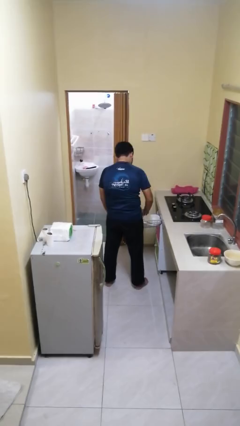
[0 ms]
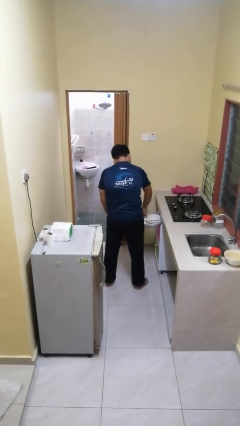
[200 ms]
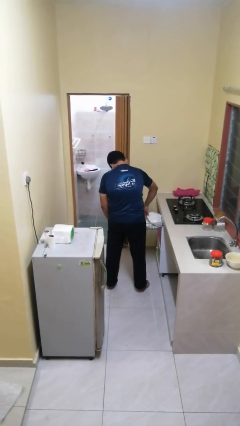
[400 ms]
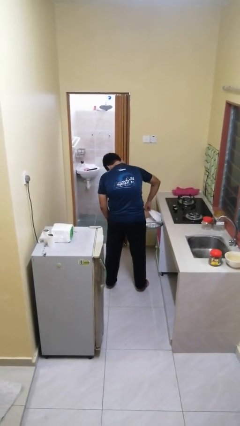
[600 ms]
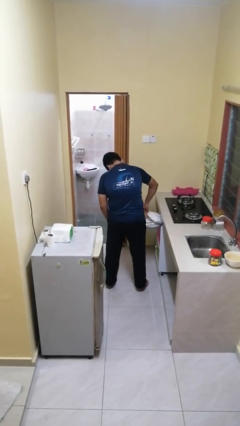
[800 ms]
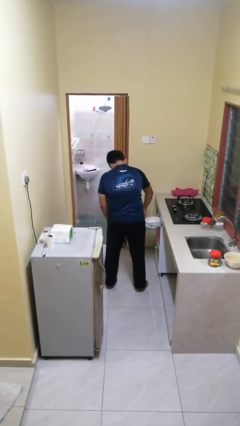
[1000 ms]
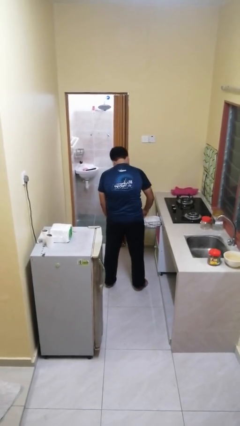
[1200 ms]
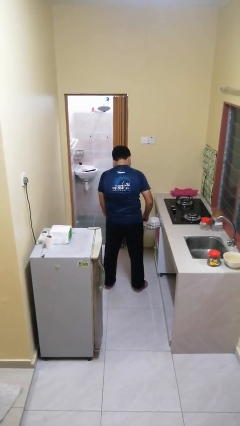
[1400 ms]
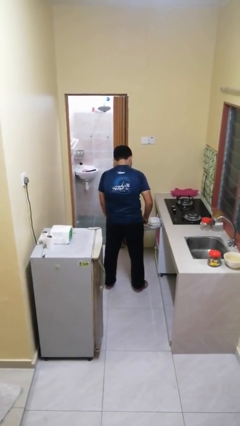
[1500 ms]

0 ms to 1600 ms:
person searches in kitchen drawer

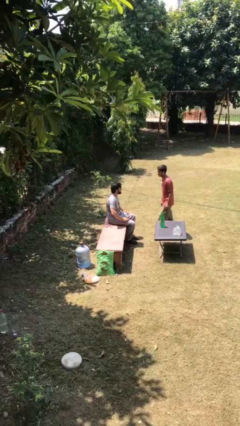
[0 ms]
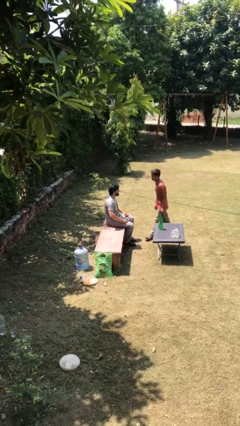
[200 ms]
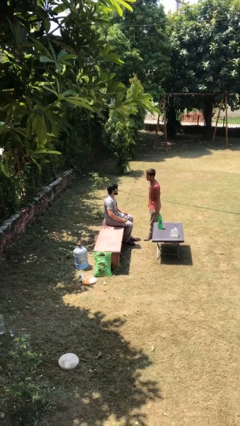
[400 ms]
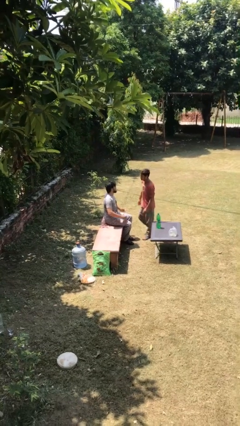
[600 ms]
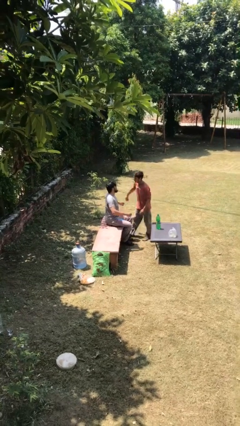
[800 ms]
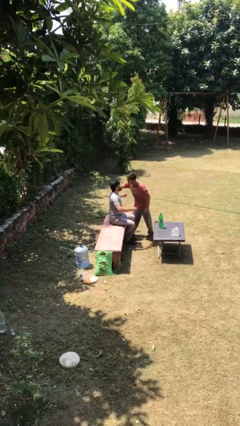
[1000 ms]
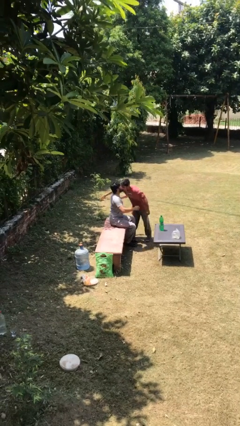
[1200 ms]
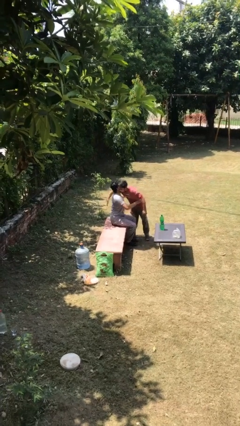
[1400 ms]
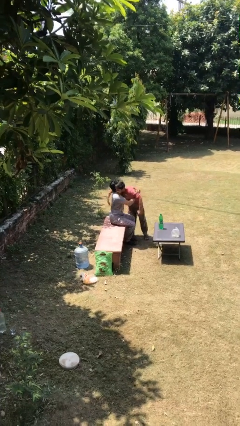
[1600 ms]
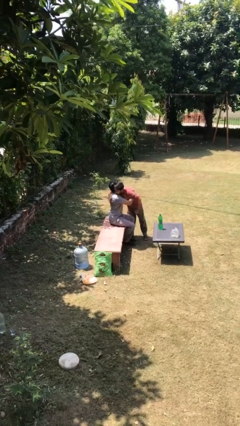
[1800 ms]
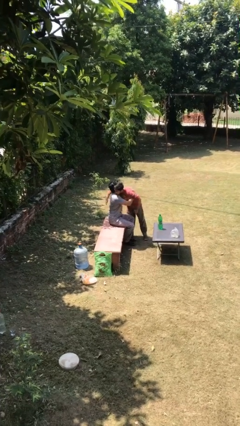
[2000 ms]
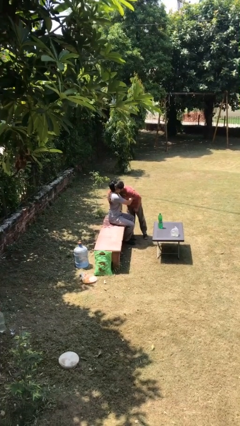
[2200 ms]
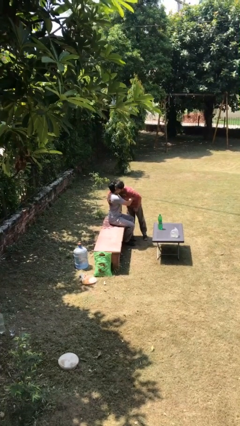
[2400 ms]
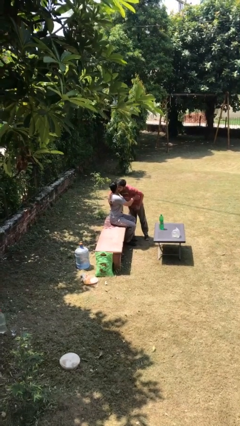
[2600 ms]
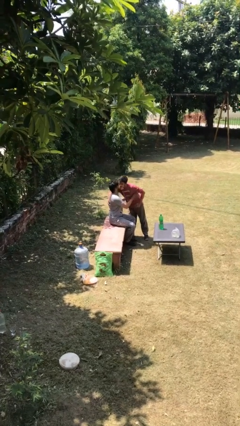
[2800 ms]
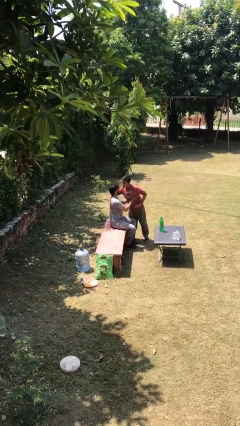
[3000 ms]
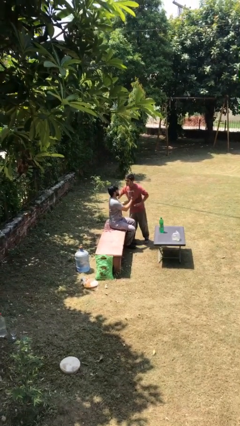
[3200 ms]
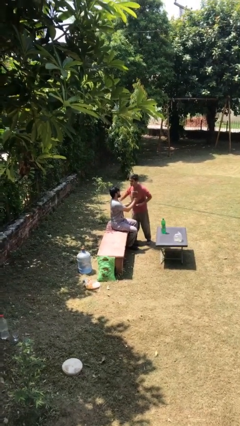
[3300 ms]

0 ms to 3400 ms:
person embraces person

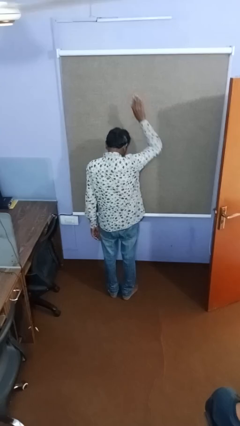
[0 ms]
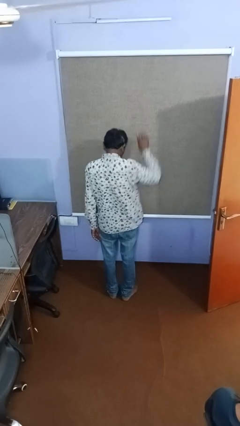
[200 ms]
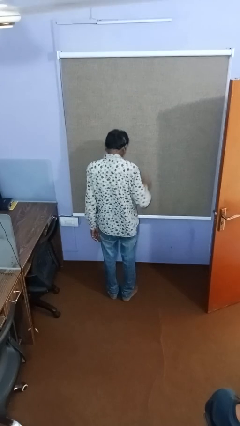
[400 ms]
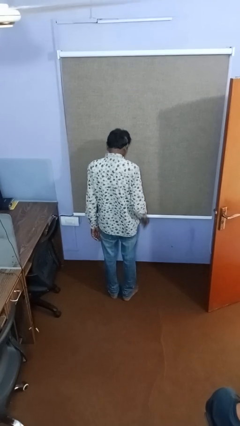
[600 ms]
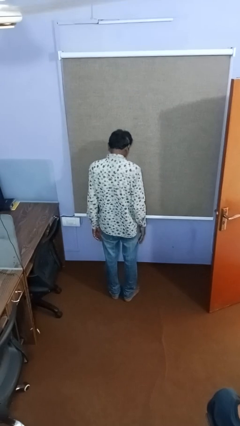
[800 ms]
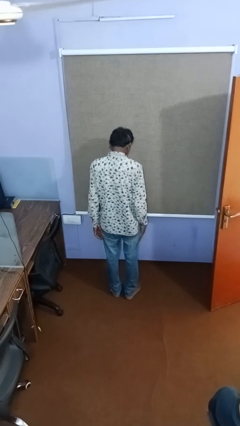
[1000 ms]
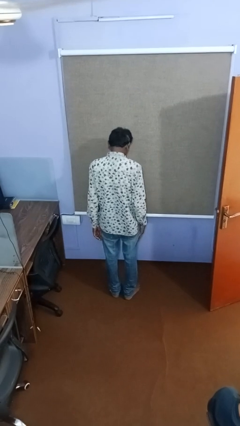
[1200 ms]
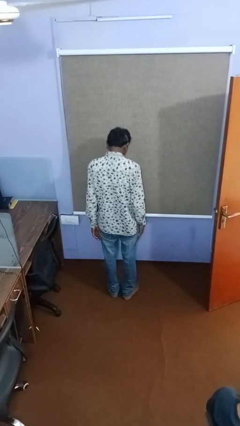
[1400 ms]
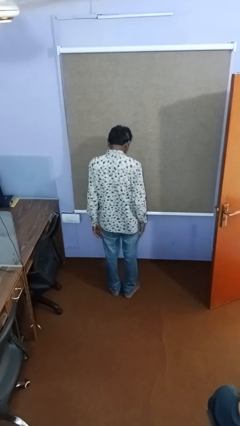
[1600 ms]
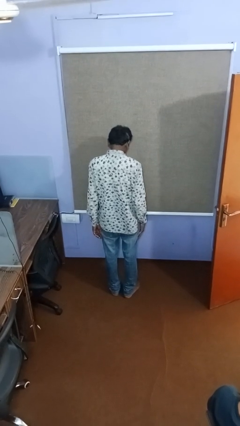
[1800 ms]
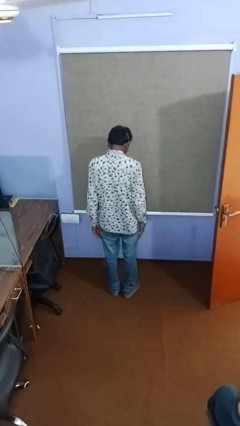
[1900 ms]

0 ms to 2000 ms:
person gestures lower hand

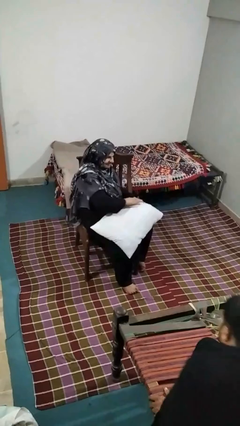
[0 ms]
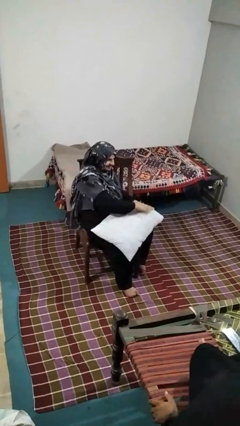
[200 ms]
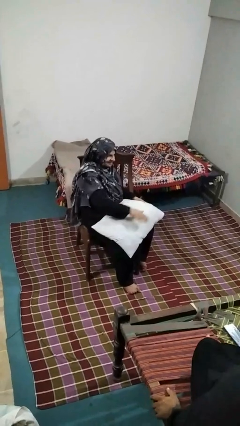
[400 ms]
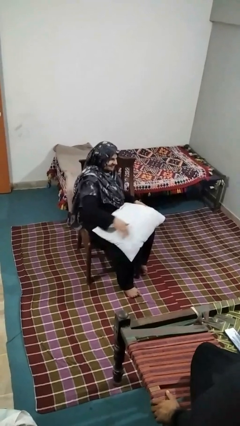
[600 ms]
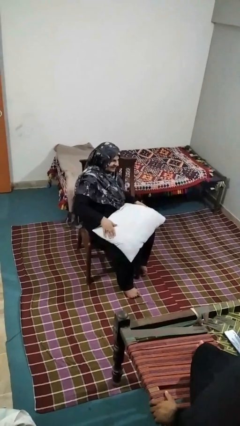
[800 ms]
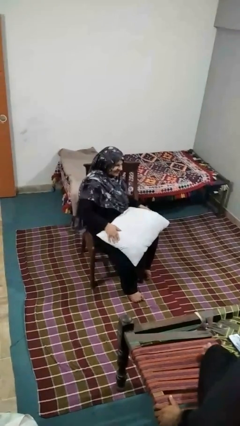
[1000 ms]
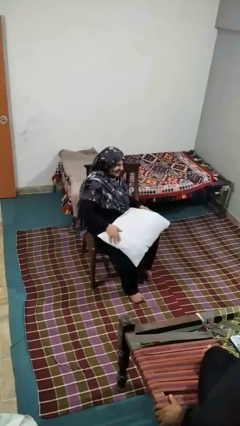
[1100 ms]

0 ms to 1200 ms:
person waves hand over object

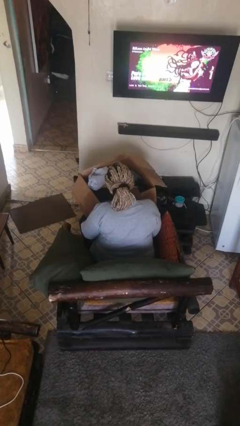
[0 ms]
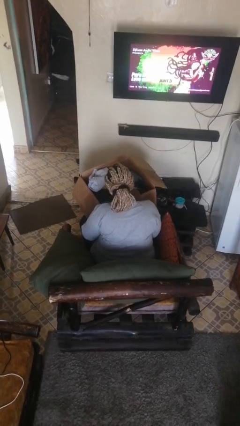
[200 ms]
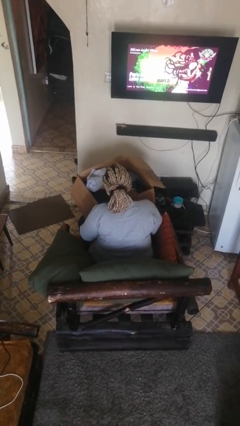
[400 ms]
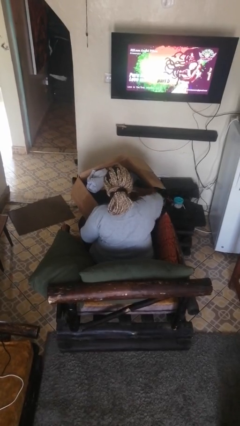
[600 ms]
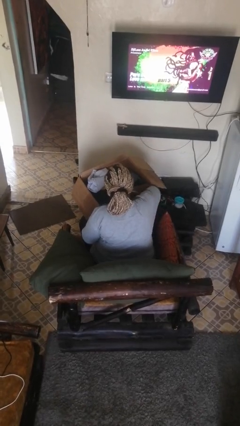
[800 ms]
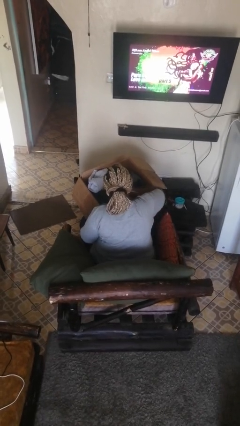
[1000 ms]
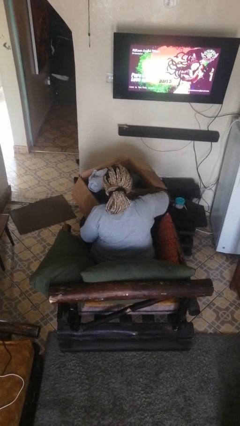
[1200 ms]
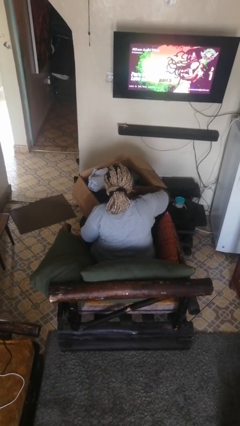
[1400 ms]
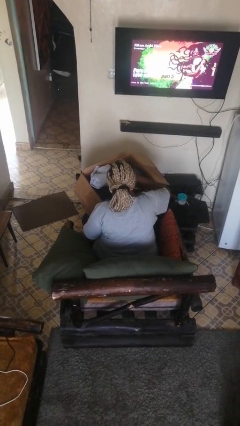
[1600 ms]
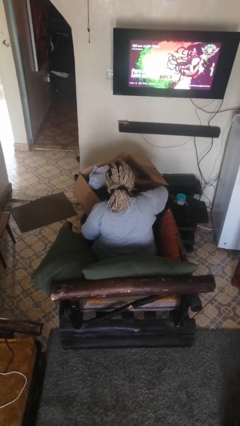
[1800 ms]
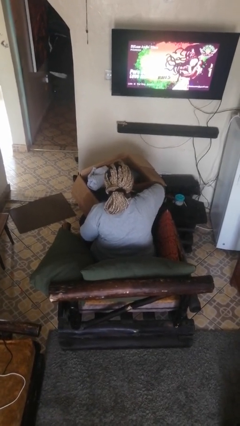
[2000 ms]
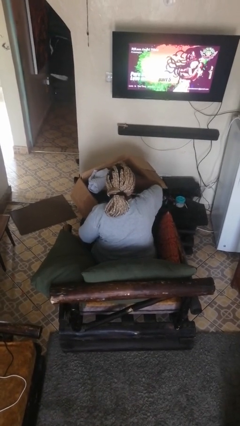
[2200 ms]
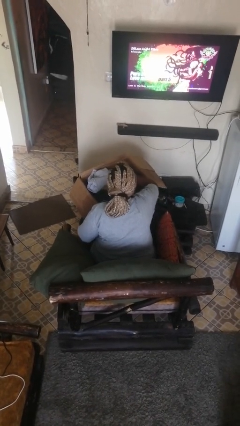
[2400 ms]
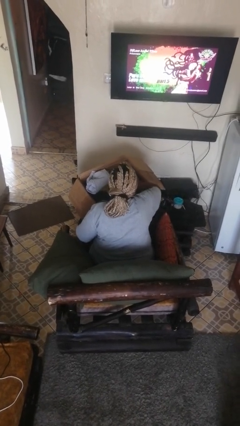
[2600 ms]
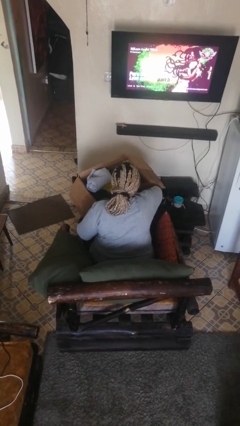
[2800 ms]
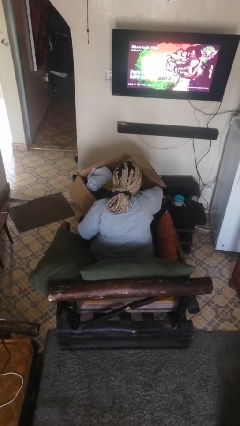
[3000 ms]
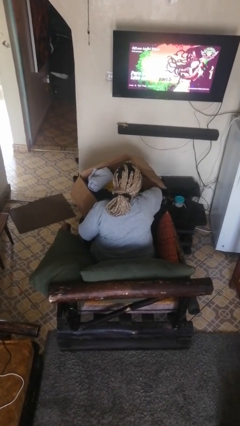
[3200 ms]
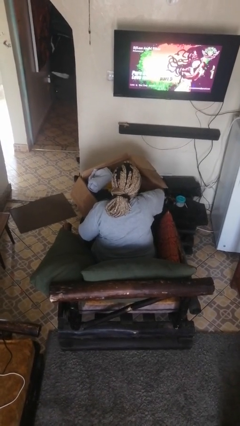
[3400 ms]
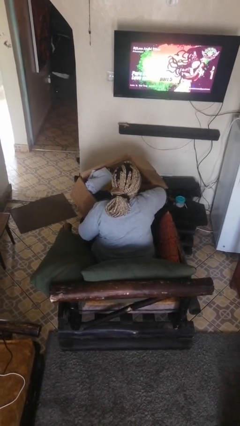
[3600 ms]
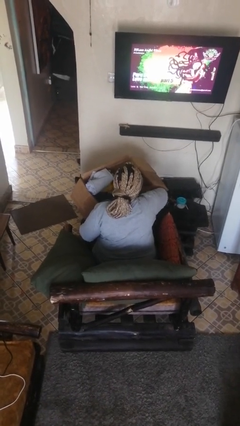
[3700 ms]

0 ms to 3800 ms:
person searches in box

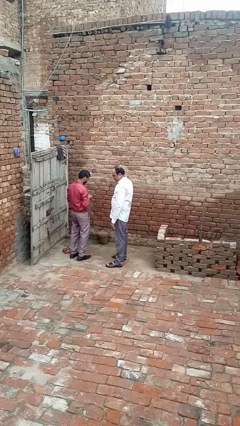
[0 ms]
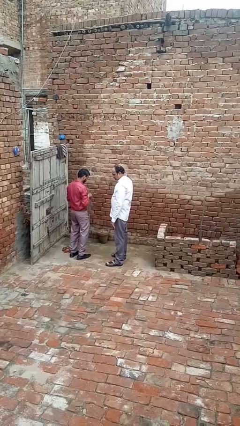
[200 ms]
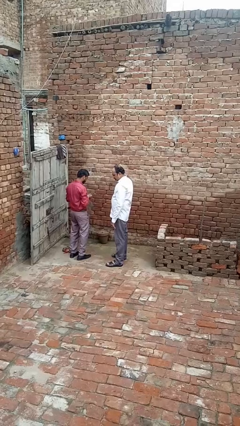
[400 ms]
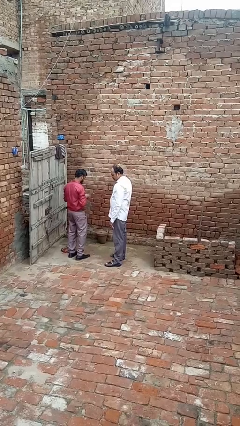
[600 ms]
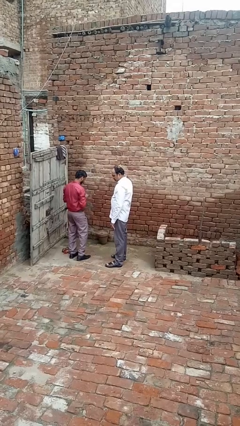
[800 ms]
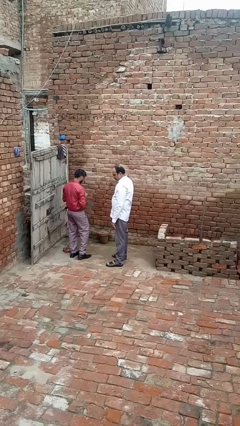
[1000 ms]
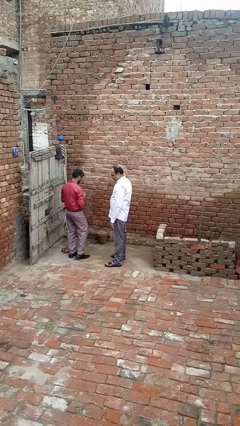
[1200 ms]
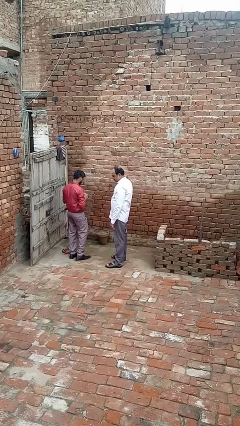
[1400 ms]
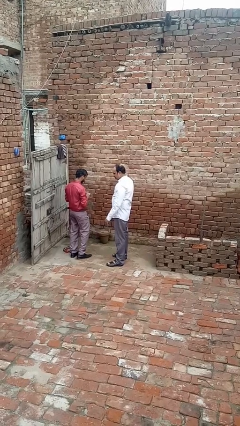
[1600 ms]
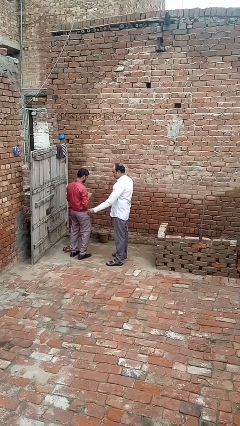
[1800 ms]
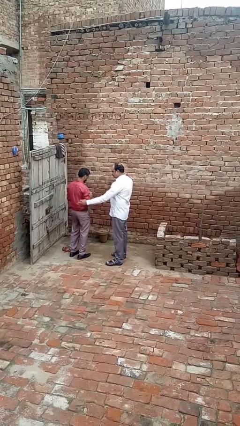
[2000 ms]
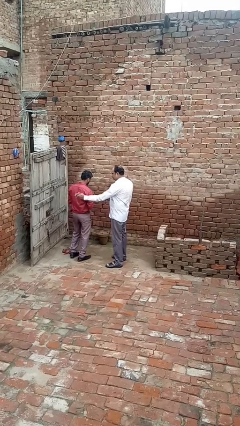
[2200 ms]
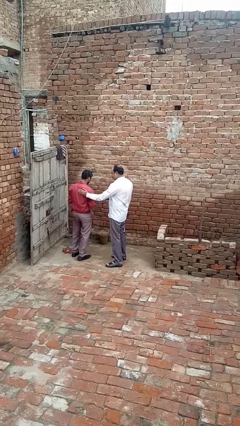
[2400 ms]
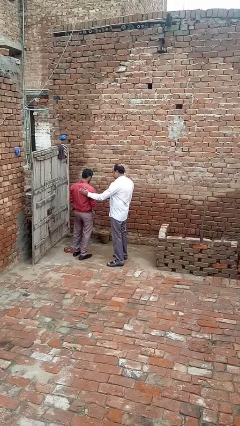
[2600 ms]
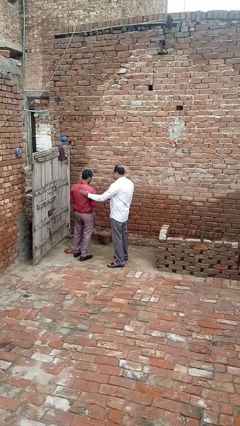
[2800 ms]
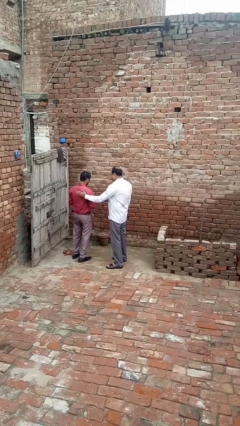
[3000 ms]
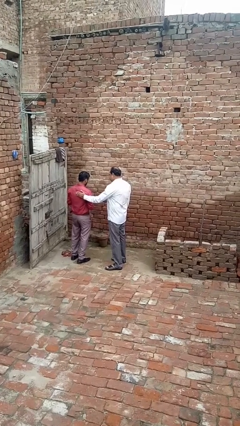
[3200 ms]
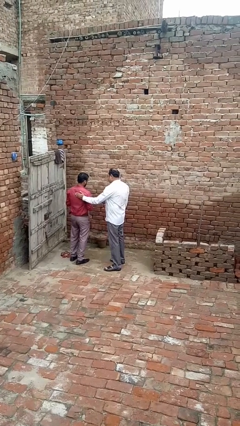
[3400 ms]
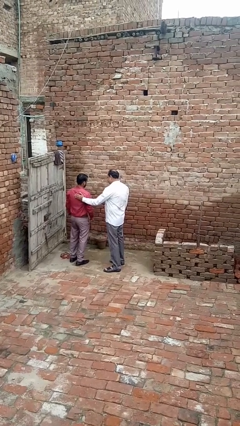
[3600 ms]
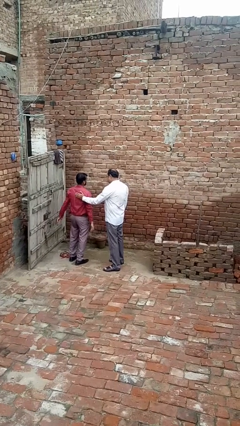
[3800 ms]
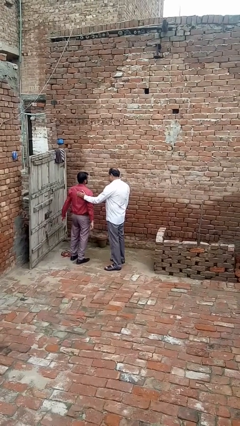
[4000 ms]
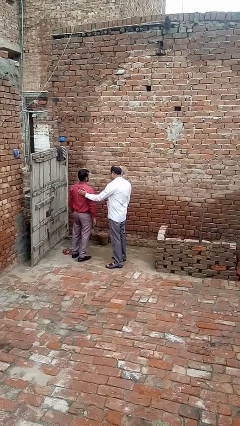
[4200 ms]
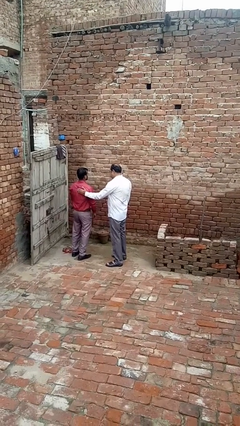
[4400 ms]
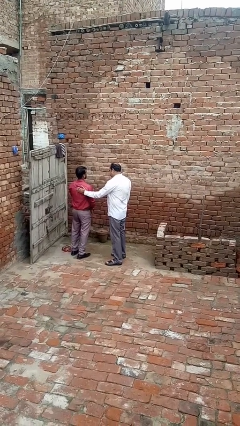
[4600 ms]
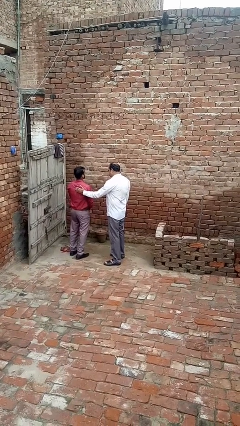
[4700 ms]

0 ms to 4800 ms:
person touches back of person

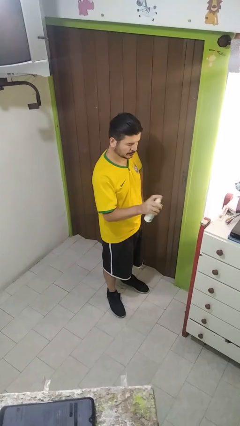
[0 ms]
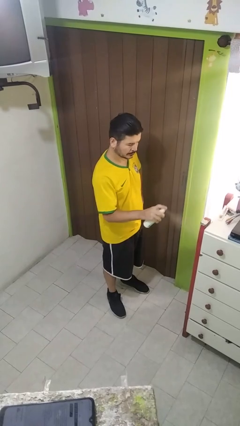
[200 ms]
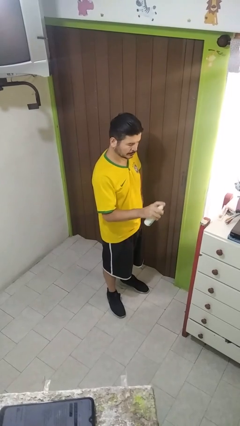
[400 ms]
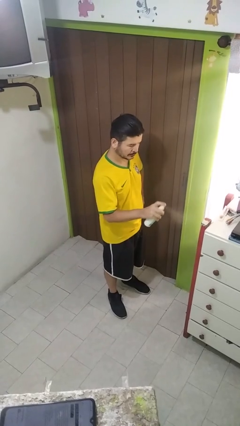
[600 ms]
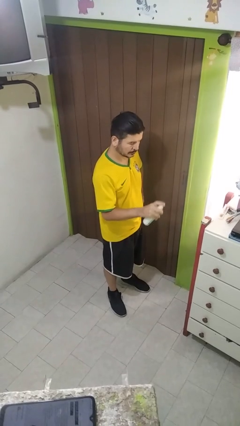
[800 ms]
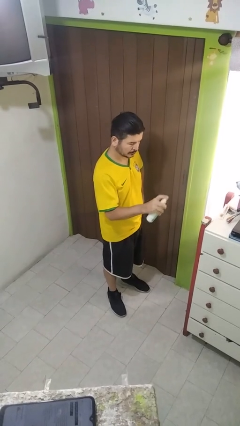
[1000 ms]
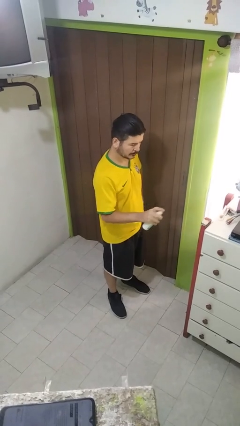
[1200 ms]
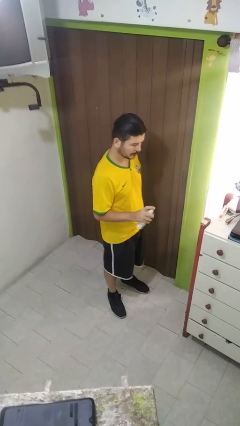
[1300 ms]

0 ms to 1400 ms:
person sprays from bottle
